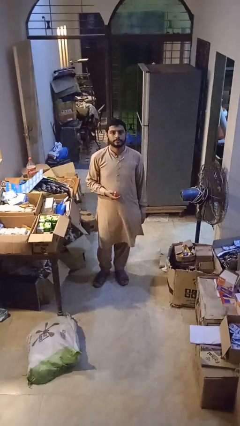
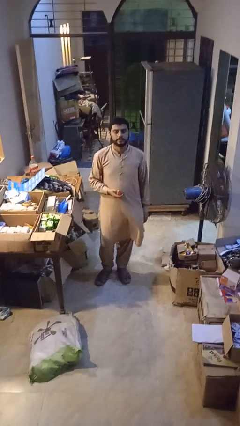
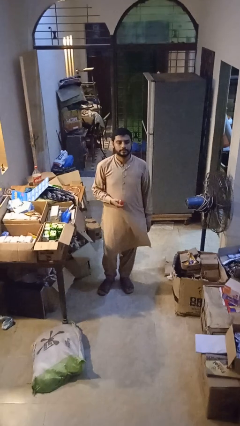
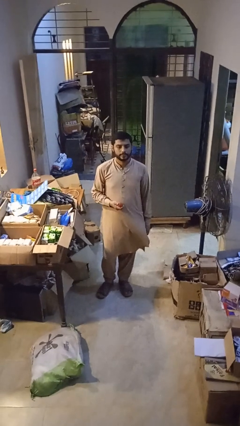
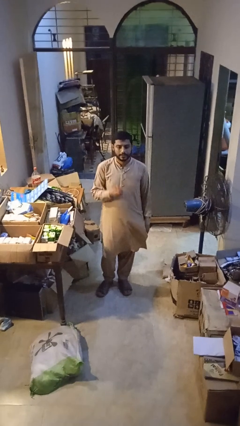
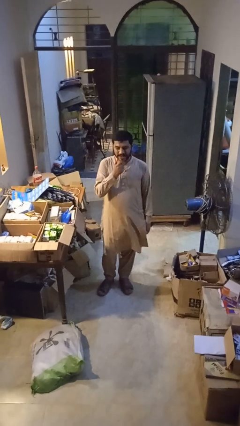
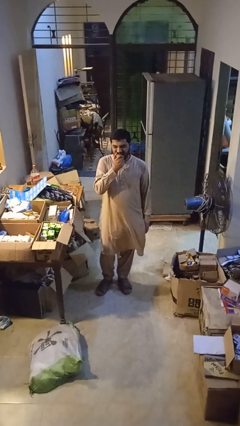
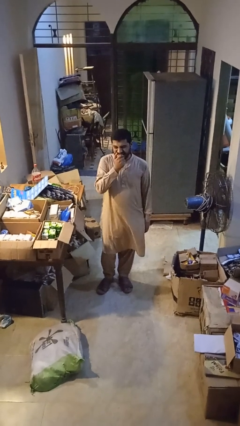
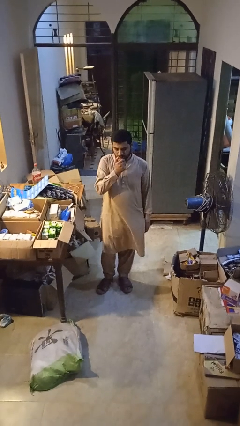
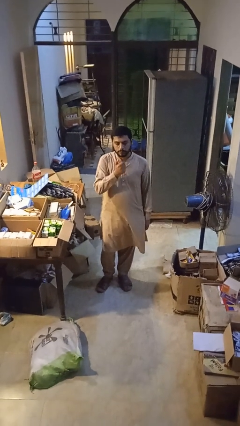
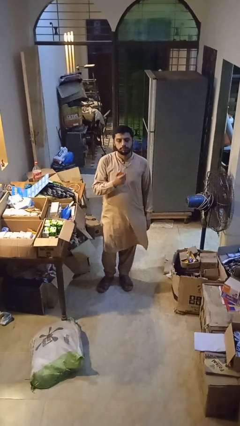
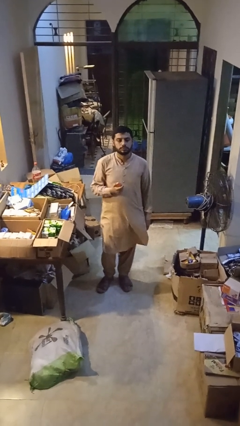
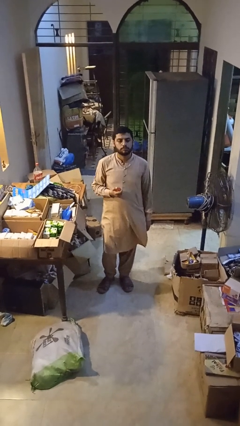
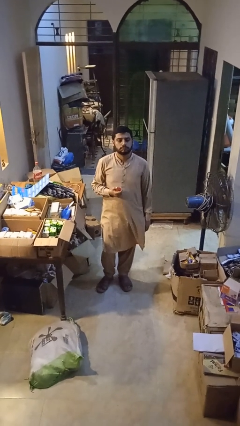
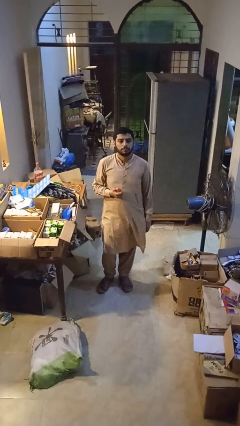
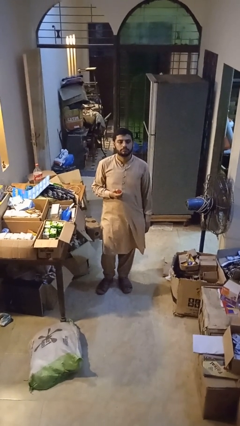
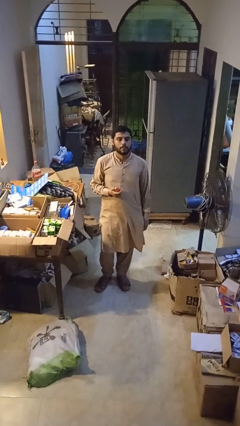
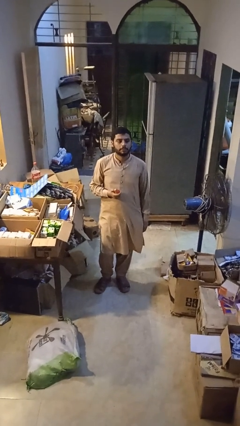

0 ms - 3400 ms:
person eats apple

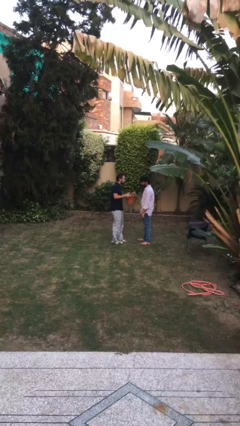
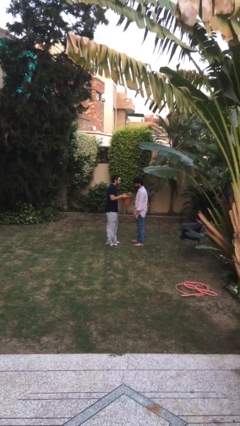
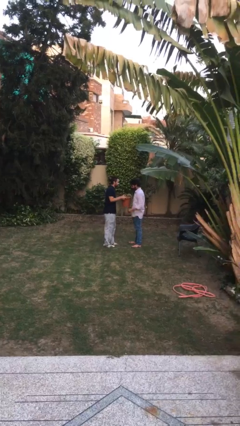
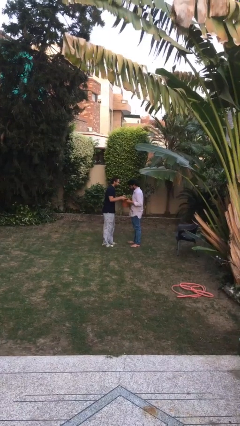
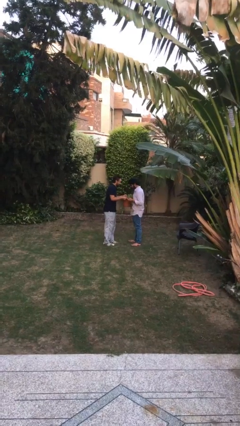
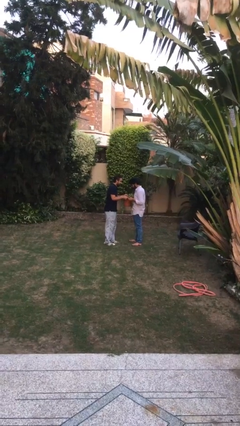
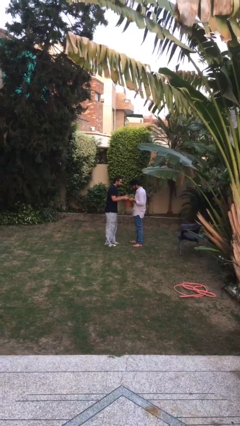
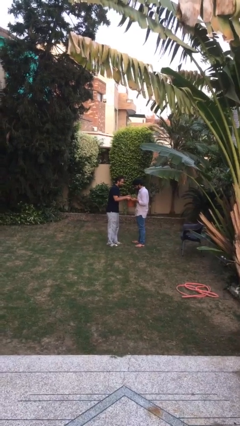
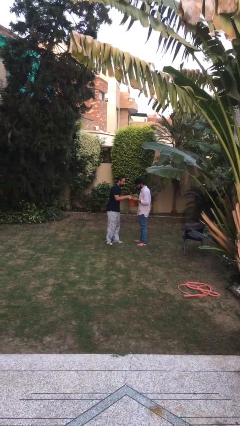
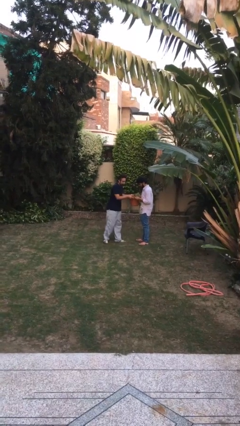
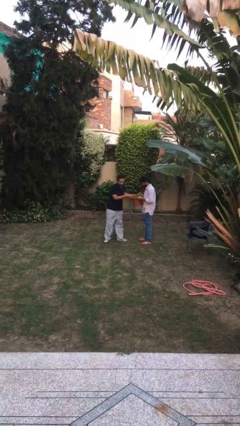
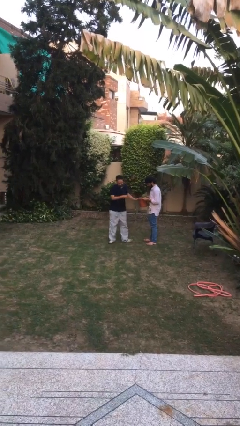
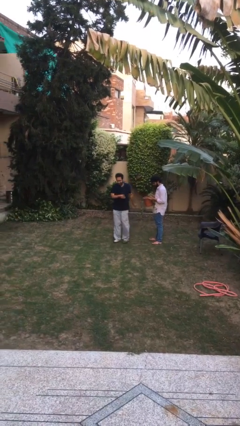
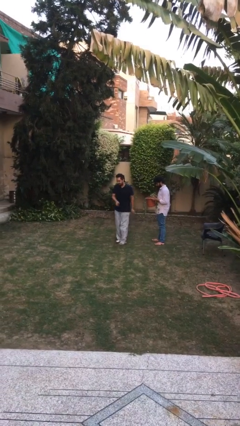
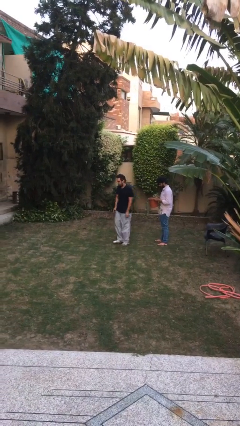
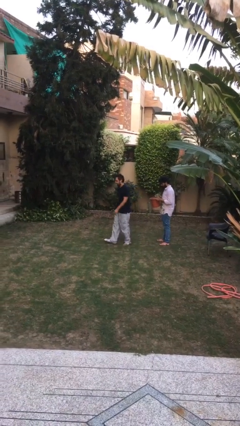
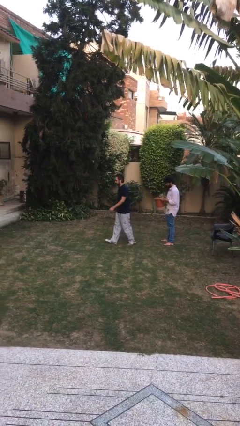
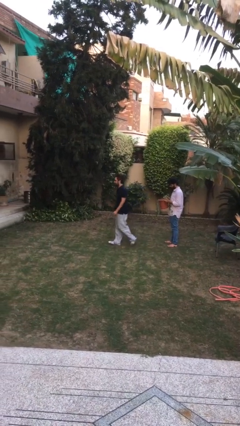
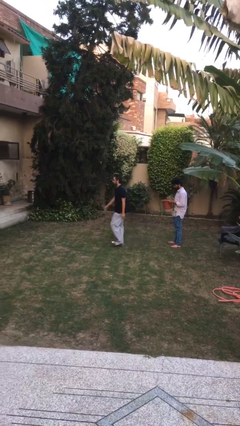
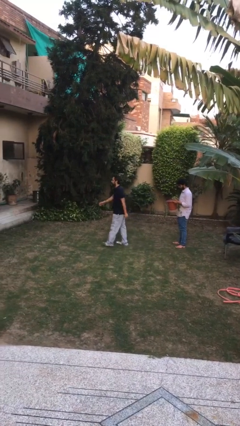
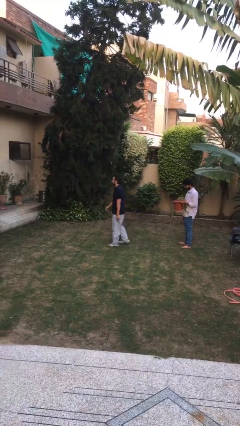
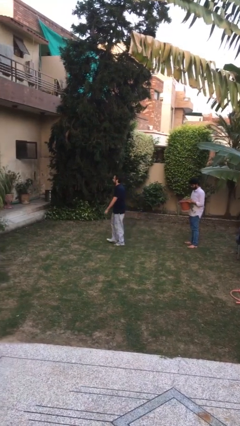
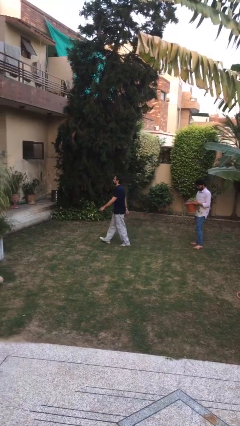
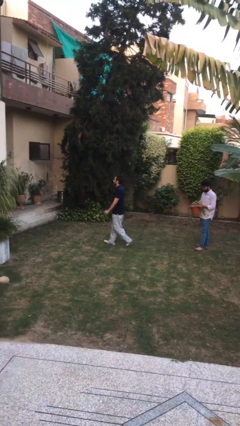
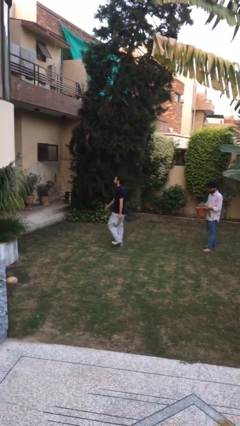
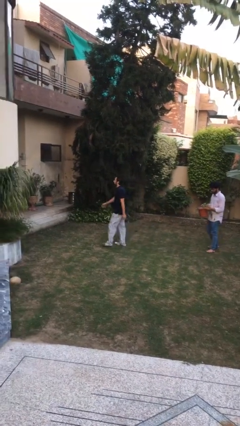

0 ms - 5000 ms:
person transfers object to person

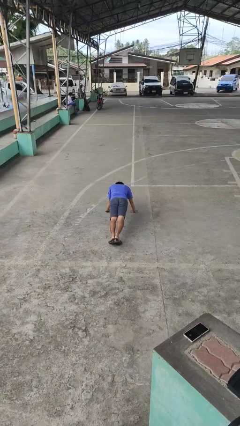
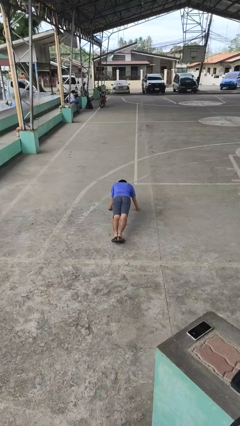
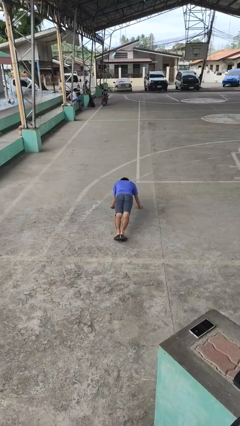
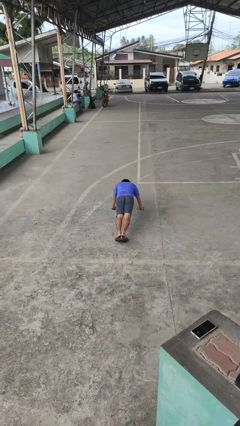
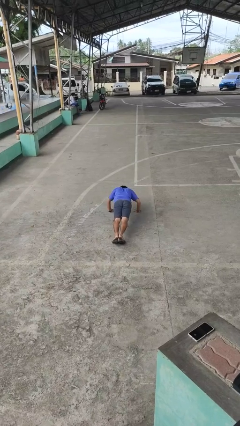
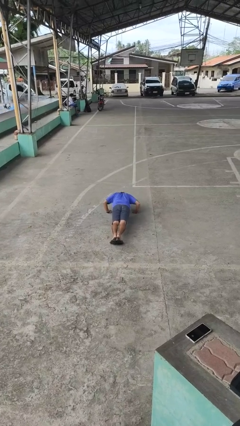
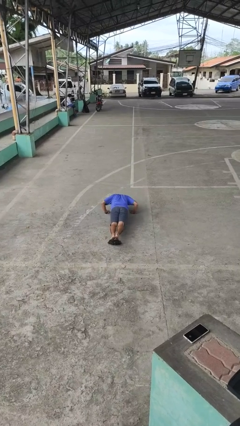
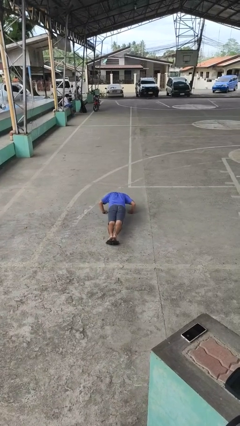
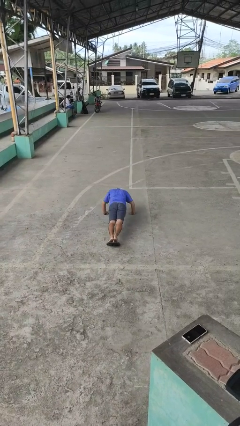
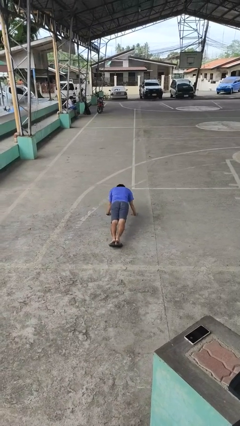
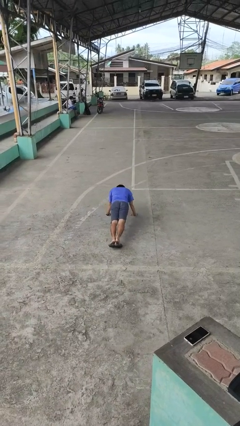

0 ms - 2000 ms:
person exercises with pushup

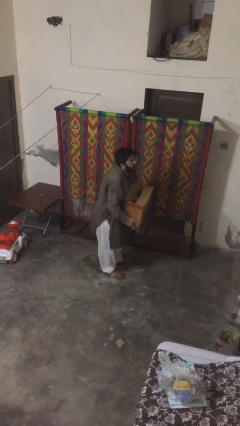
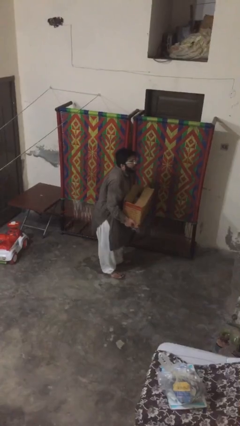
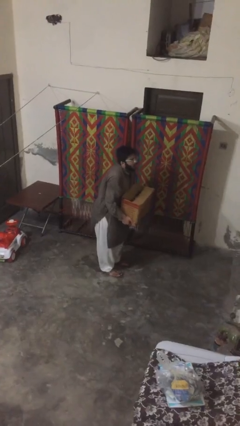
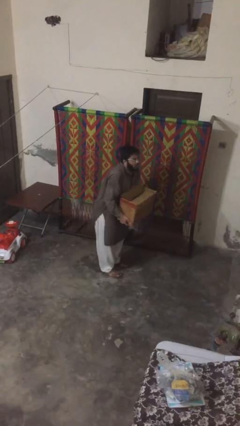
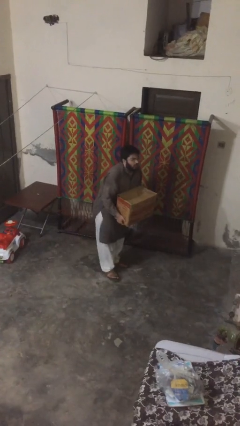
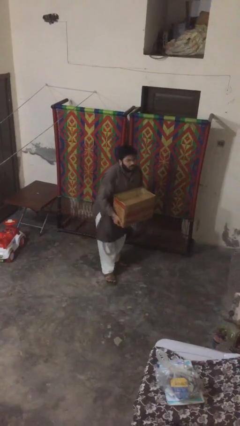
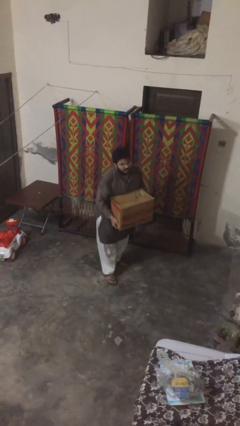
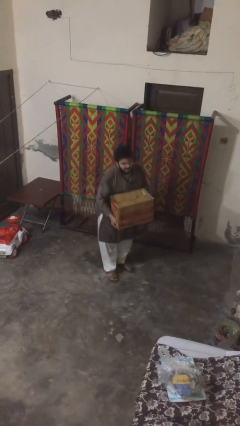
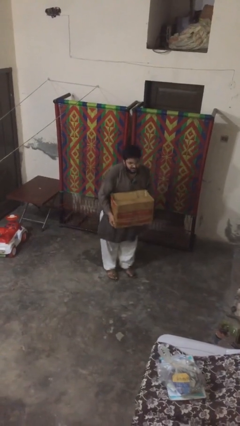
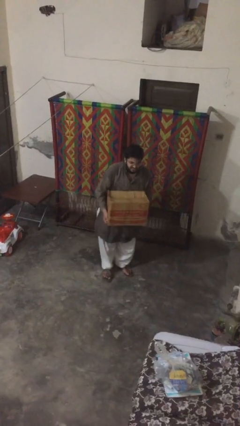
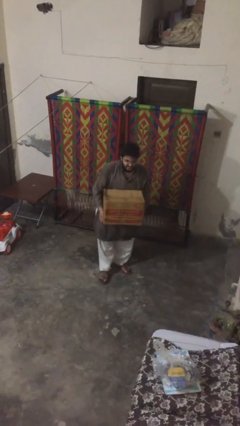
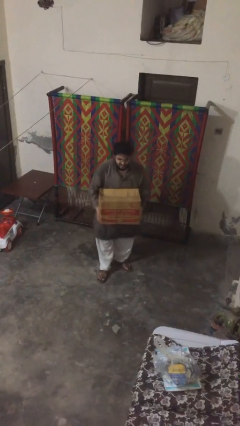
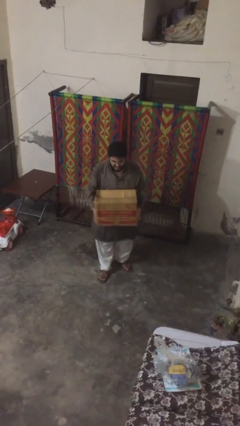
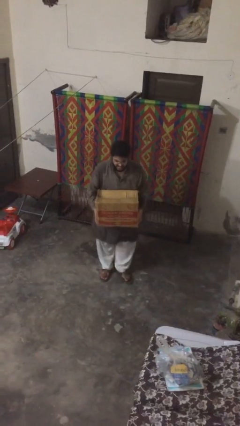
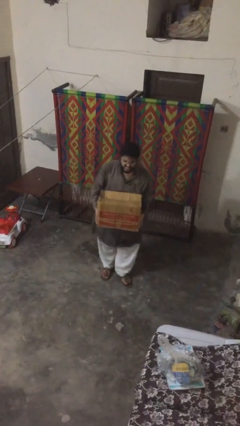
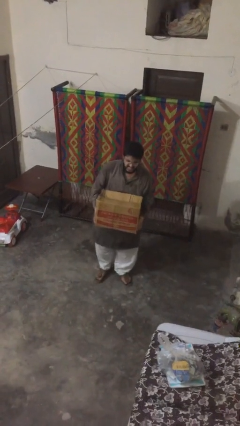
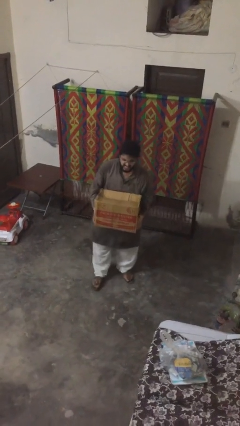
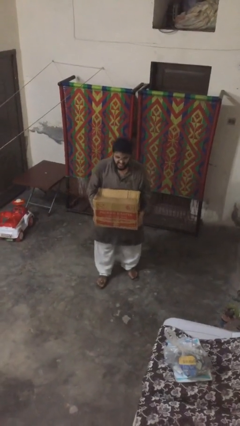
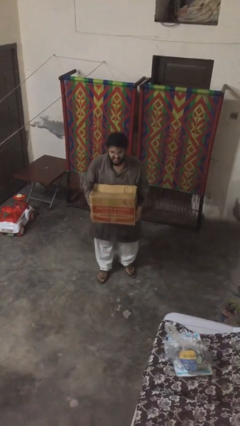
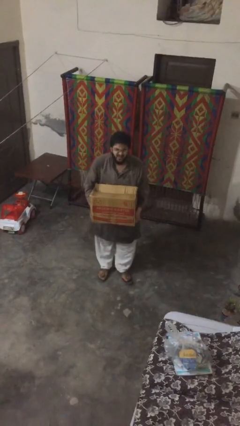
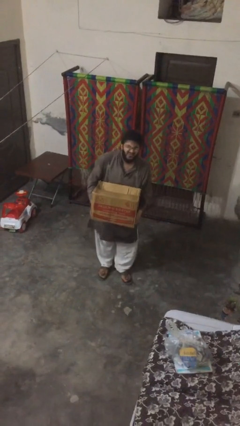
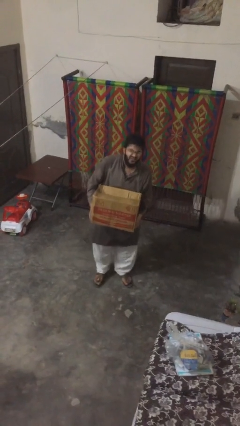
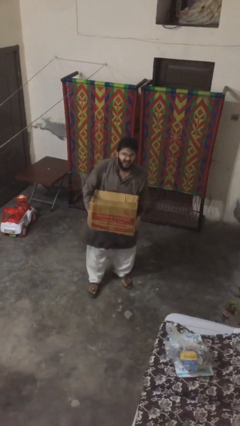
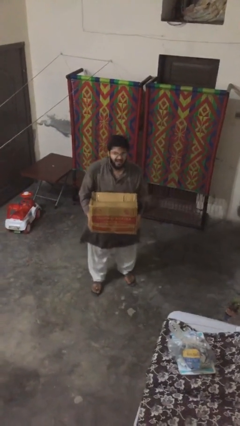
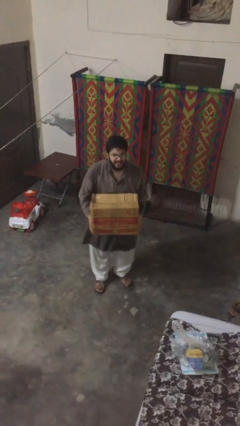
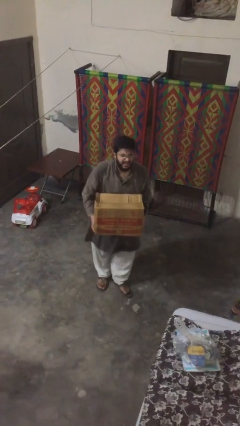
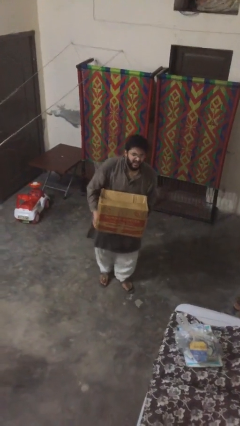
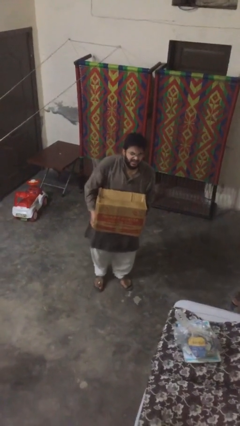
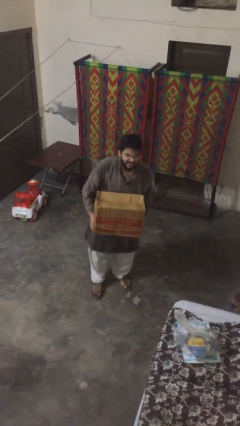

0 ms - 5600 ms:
person carries heavy object

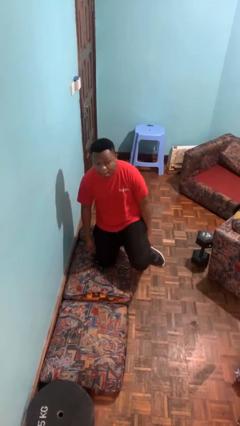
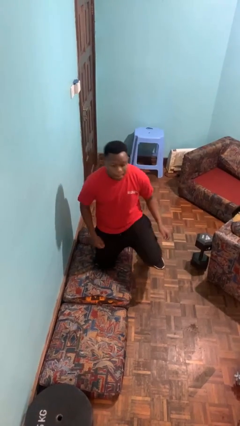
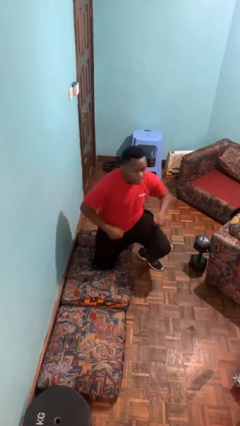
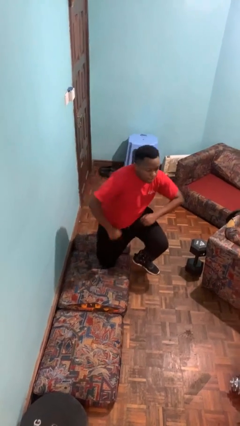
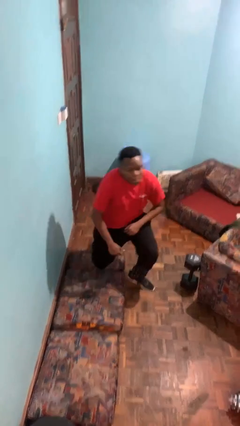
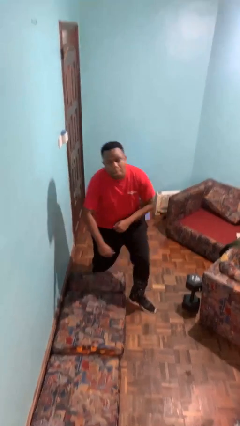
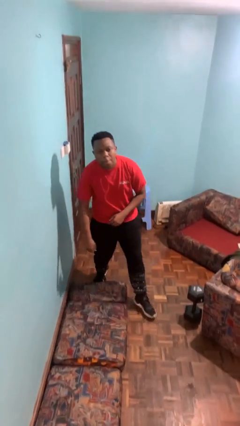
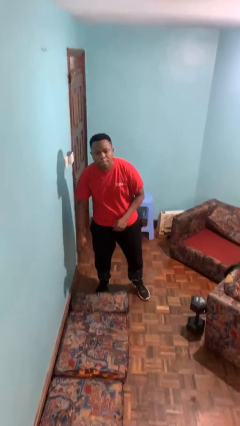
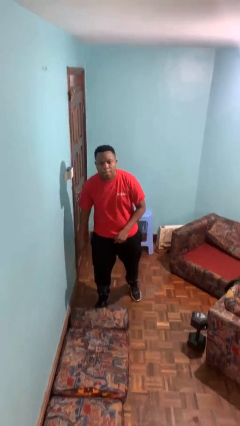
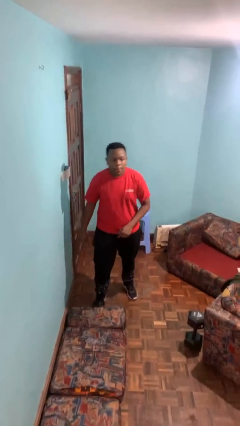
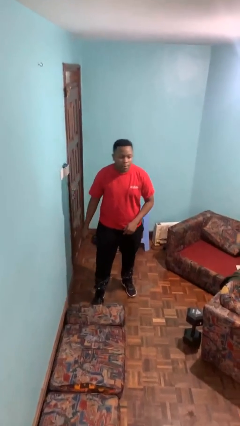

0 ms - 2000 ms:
person stands up from floor
